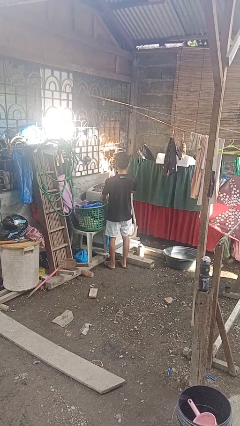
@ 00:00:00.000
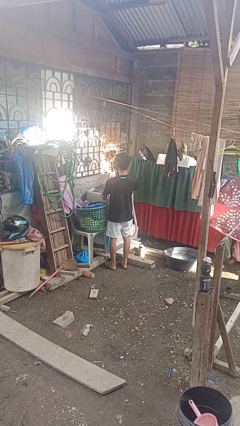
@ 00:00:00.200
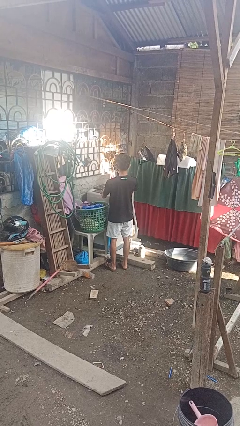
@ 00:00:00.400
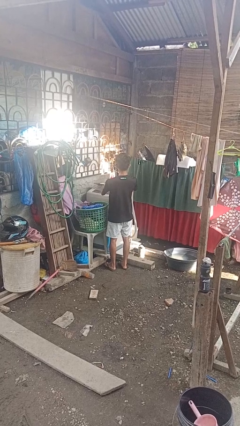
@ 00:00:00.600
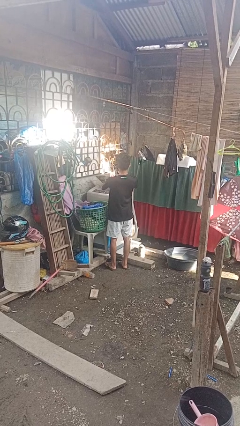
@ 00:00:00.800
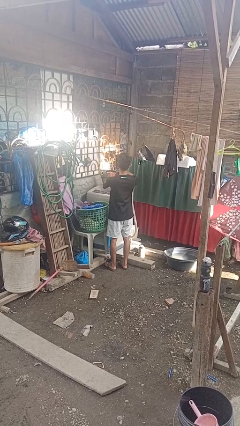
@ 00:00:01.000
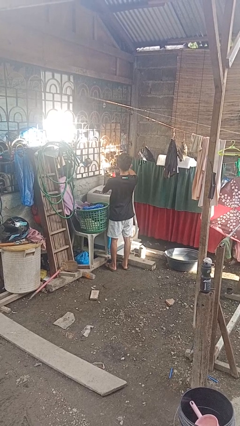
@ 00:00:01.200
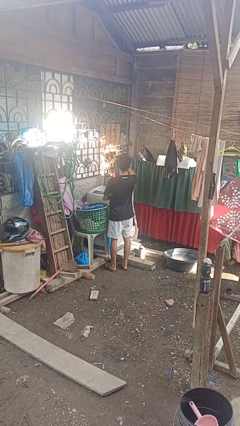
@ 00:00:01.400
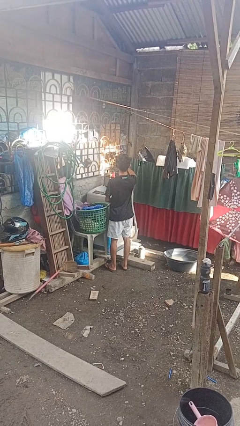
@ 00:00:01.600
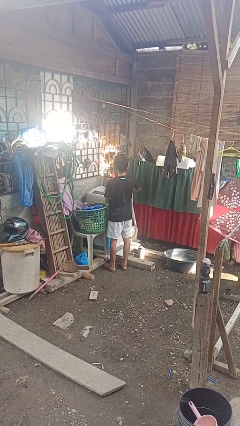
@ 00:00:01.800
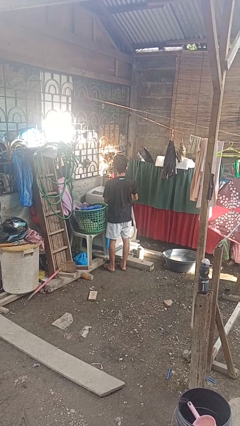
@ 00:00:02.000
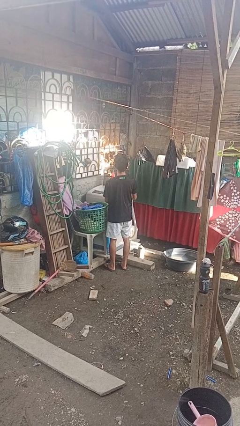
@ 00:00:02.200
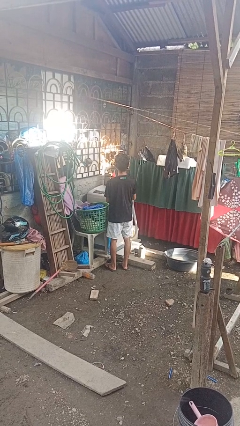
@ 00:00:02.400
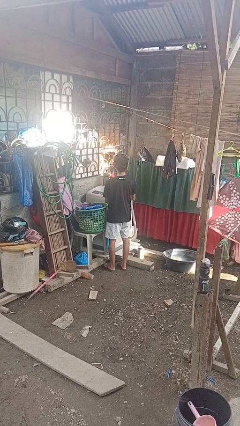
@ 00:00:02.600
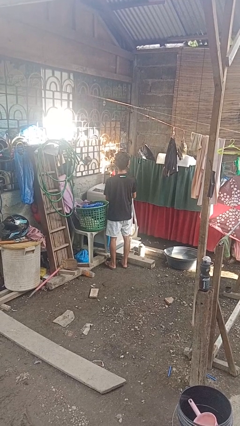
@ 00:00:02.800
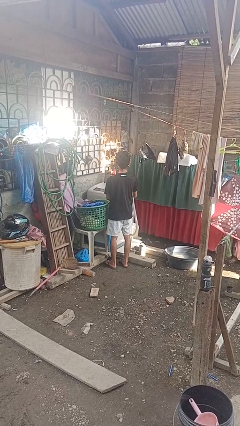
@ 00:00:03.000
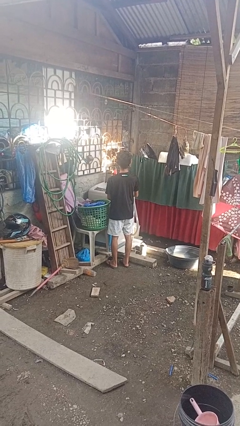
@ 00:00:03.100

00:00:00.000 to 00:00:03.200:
person opens clothes washer

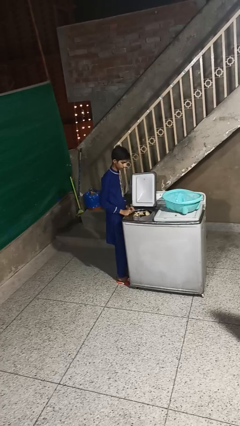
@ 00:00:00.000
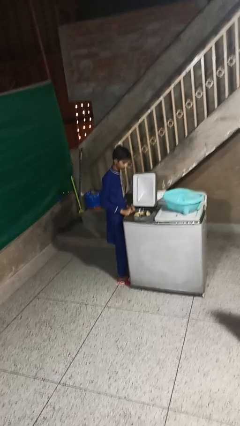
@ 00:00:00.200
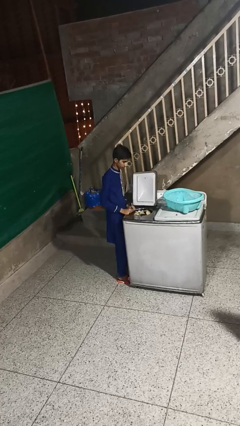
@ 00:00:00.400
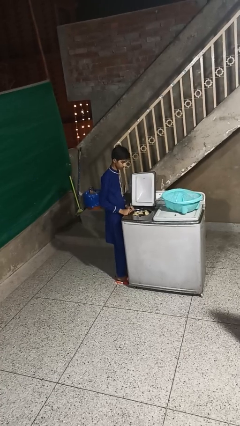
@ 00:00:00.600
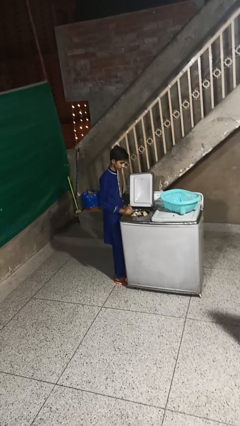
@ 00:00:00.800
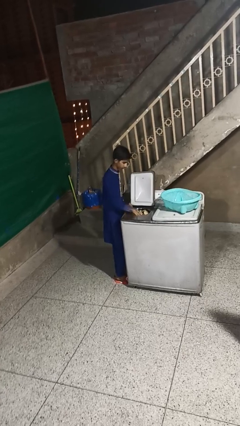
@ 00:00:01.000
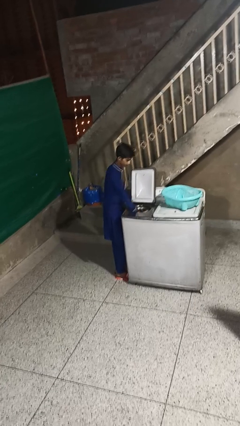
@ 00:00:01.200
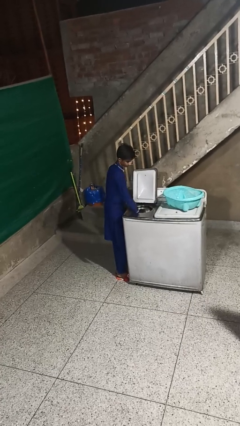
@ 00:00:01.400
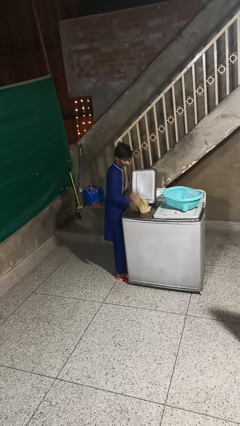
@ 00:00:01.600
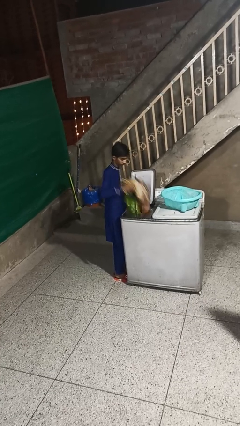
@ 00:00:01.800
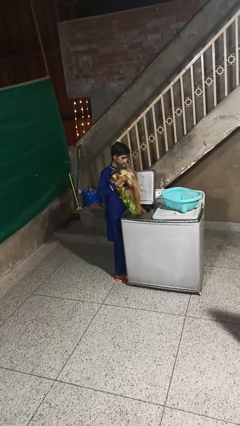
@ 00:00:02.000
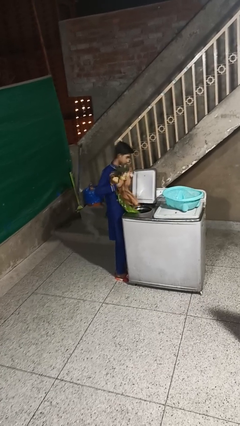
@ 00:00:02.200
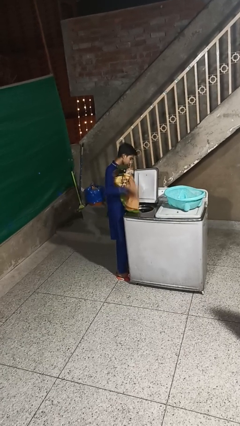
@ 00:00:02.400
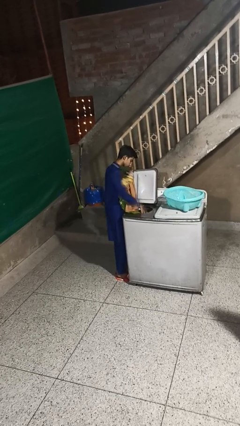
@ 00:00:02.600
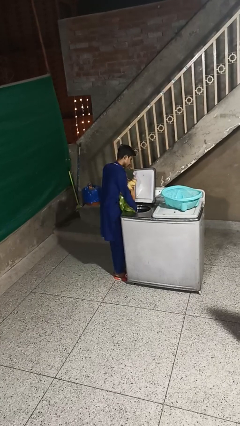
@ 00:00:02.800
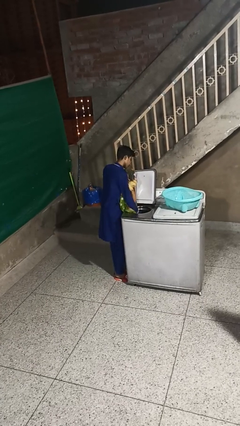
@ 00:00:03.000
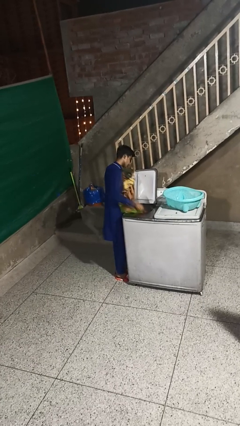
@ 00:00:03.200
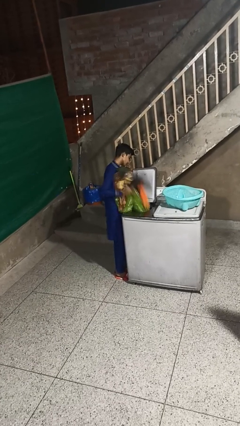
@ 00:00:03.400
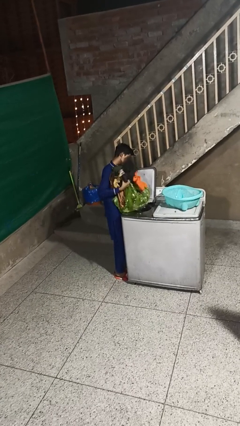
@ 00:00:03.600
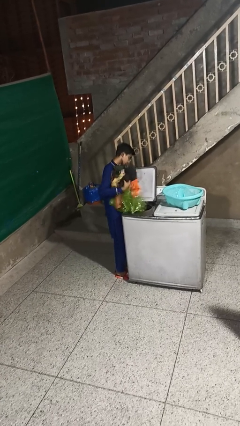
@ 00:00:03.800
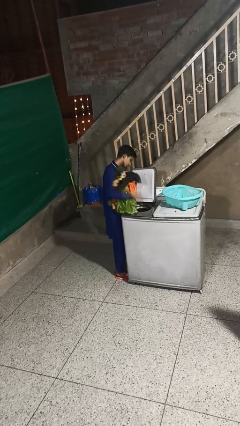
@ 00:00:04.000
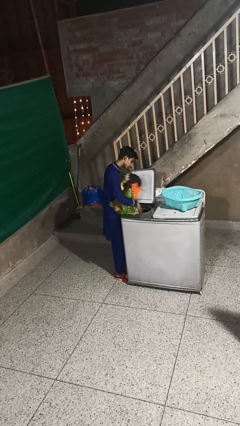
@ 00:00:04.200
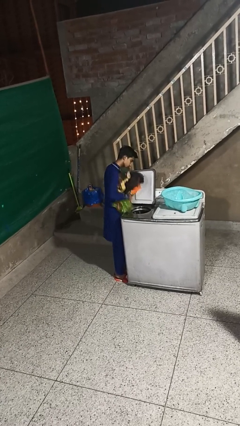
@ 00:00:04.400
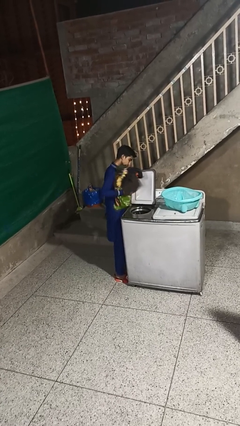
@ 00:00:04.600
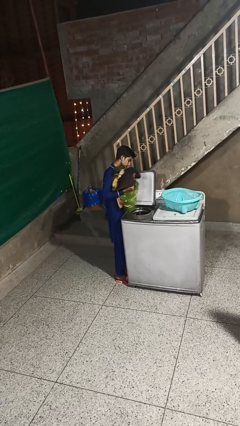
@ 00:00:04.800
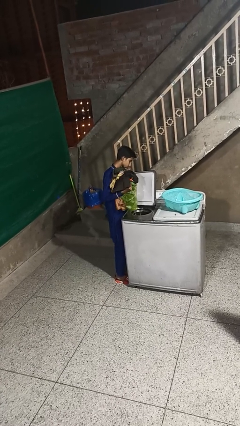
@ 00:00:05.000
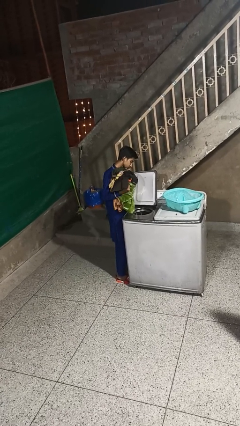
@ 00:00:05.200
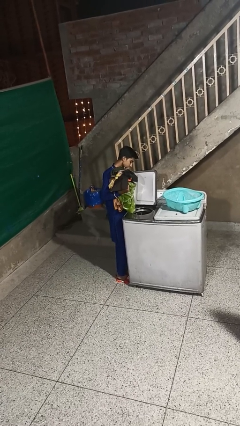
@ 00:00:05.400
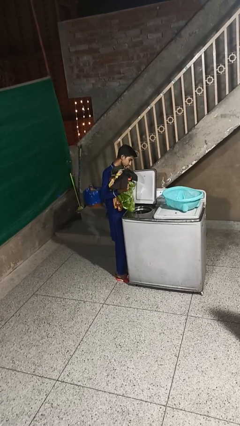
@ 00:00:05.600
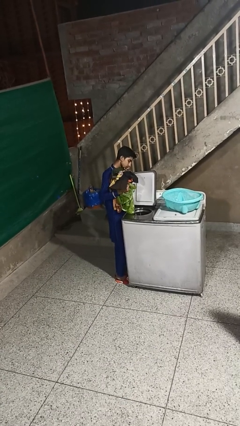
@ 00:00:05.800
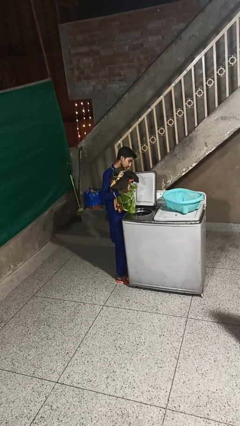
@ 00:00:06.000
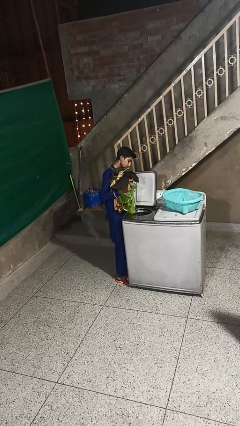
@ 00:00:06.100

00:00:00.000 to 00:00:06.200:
person unloads dryer

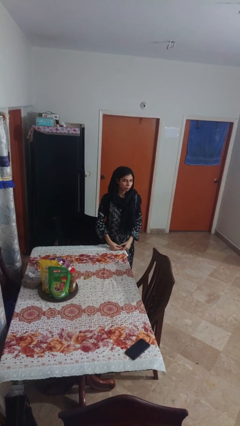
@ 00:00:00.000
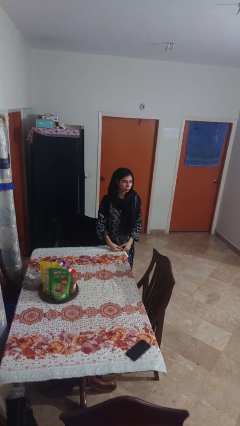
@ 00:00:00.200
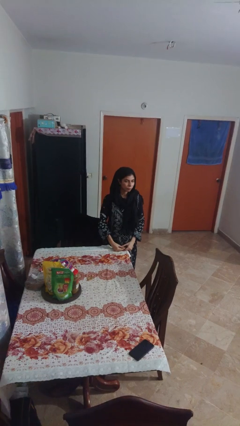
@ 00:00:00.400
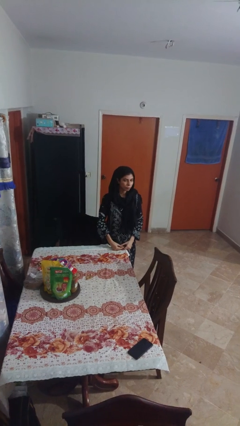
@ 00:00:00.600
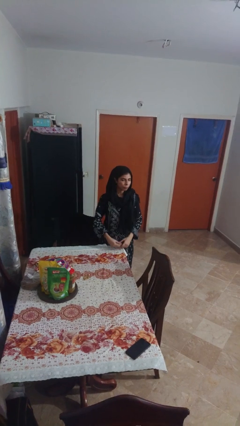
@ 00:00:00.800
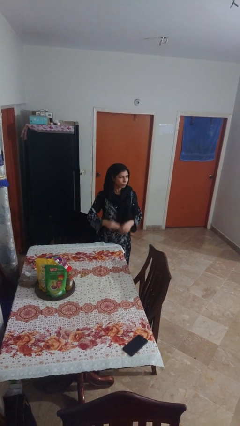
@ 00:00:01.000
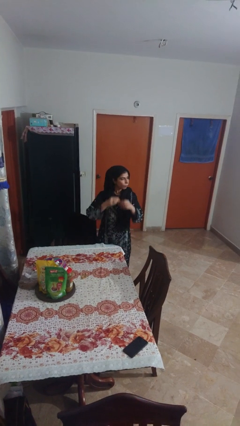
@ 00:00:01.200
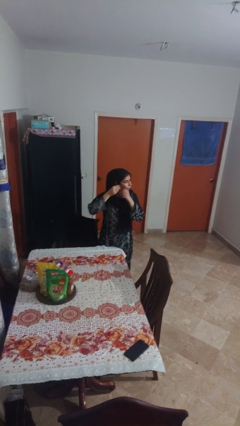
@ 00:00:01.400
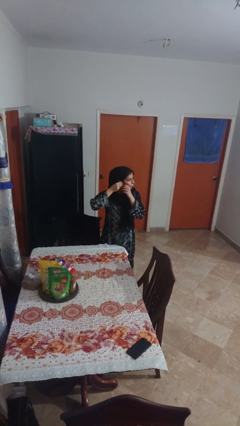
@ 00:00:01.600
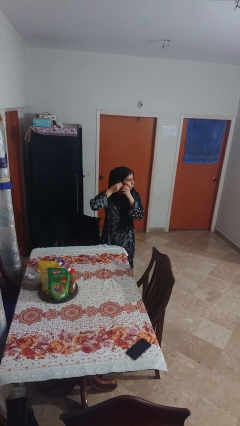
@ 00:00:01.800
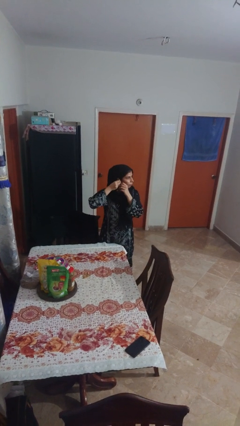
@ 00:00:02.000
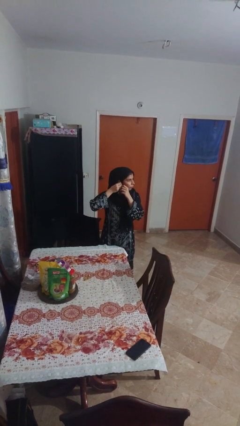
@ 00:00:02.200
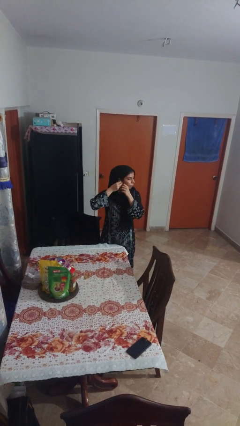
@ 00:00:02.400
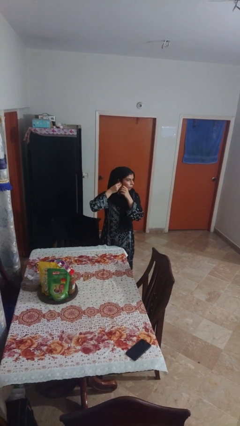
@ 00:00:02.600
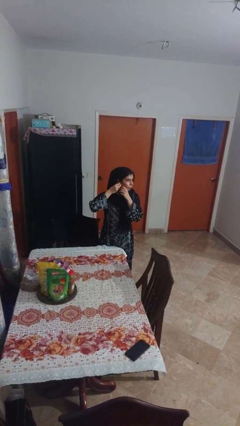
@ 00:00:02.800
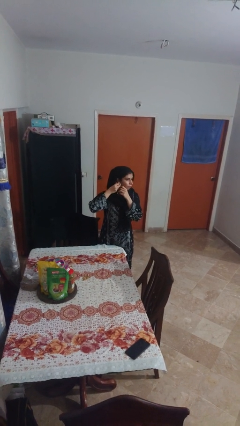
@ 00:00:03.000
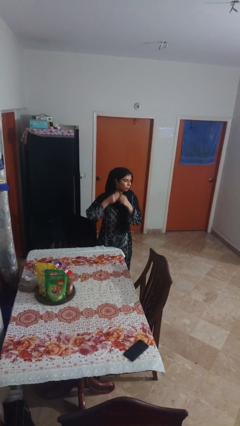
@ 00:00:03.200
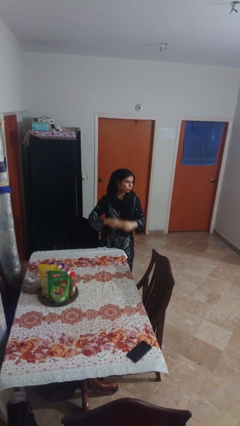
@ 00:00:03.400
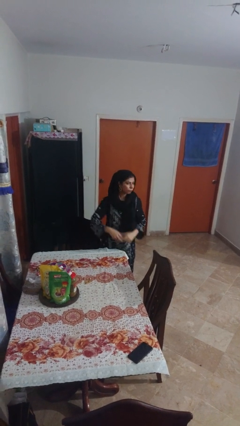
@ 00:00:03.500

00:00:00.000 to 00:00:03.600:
person puts on earrings

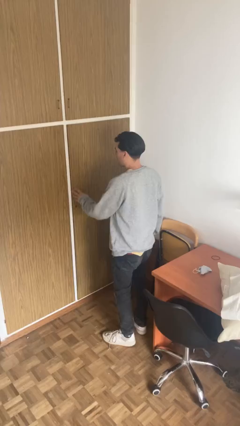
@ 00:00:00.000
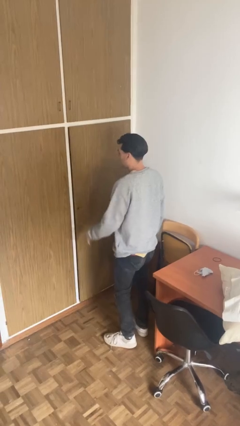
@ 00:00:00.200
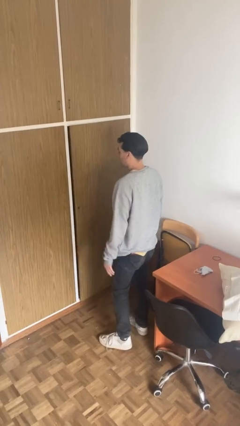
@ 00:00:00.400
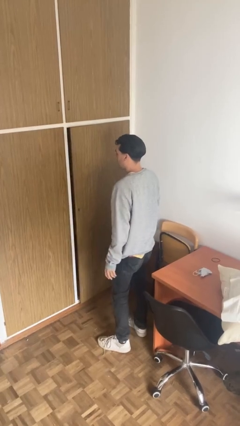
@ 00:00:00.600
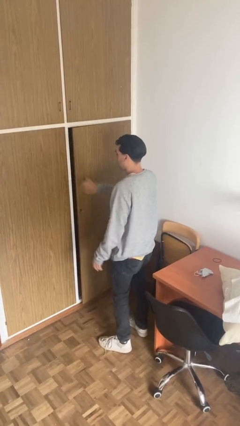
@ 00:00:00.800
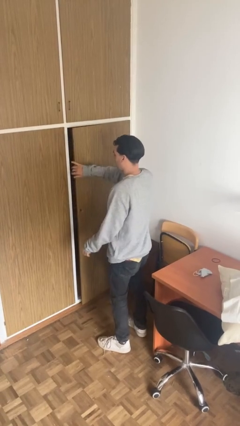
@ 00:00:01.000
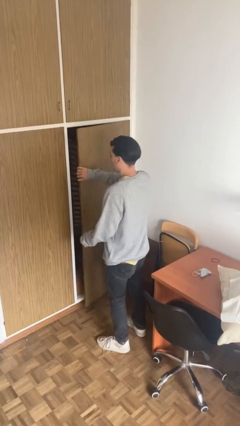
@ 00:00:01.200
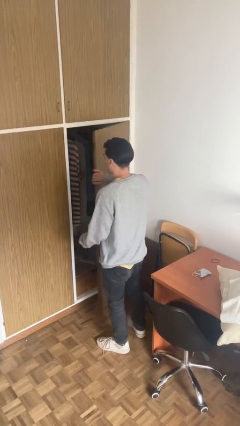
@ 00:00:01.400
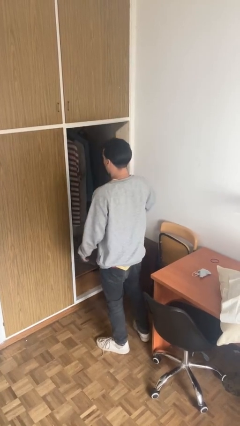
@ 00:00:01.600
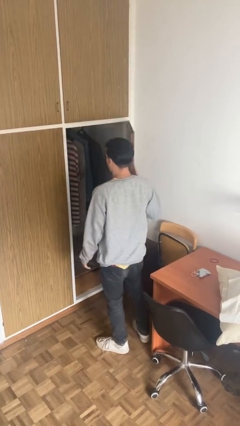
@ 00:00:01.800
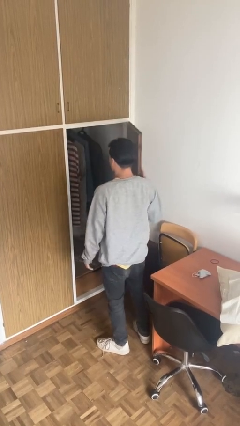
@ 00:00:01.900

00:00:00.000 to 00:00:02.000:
person opens closet door

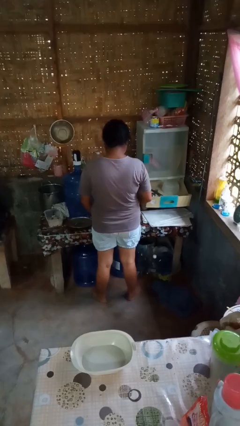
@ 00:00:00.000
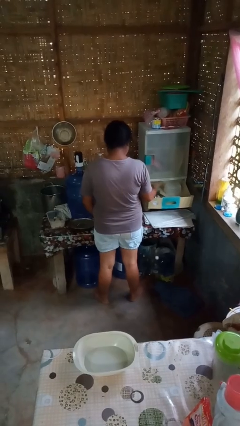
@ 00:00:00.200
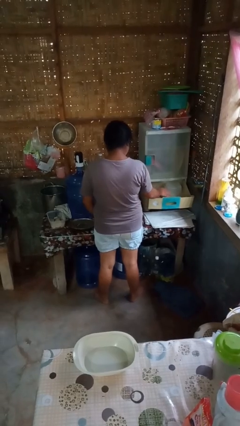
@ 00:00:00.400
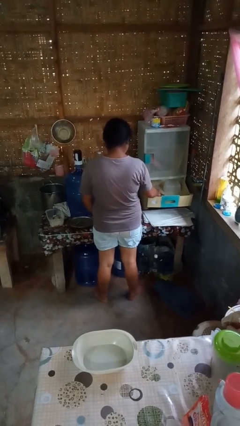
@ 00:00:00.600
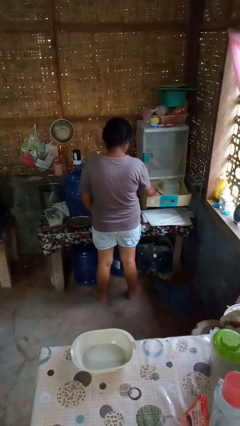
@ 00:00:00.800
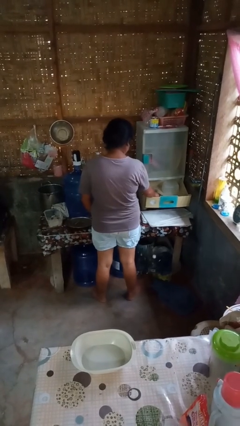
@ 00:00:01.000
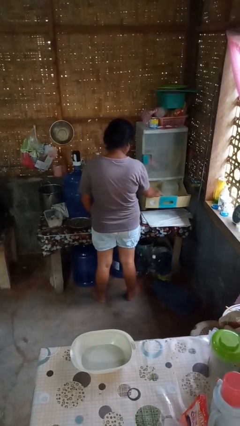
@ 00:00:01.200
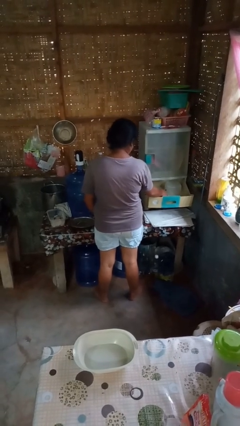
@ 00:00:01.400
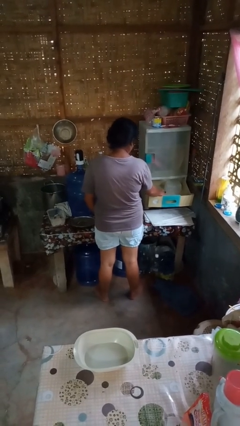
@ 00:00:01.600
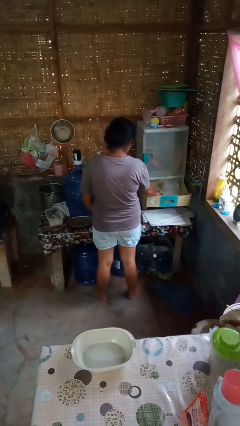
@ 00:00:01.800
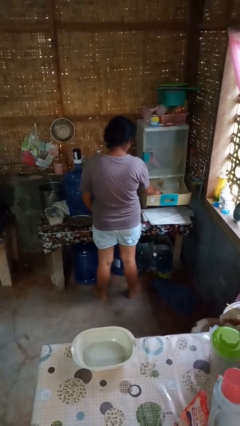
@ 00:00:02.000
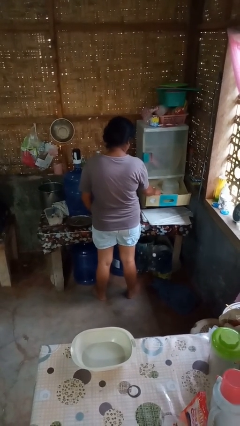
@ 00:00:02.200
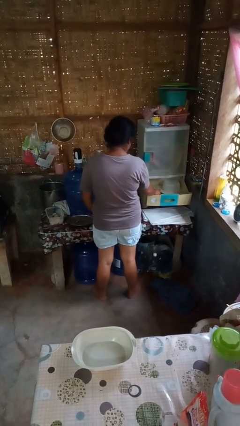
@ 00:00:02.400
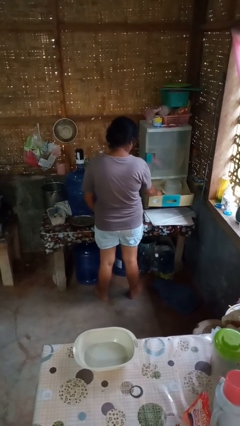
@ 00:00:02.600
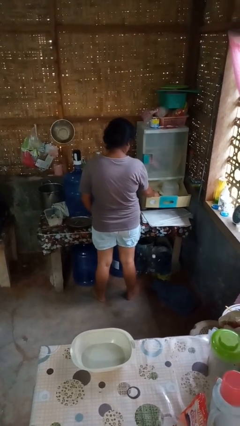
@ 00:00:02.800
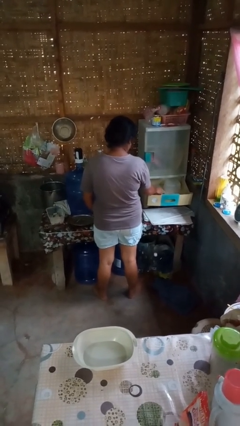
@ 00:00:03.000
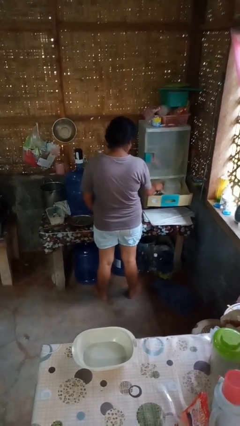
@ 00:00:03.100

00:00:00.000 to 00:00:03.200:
person searches in kitchen drawer
